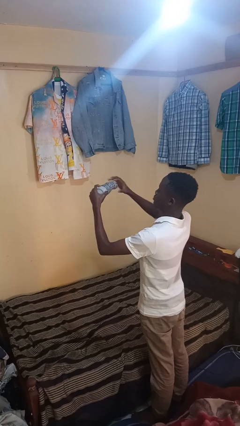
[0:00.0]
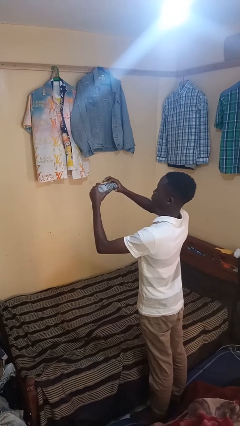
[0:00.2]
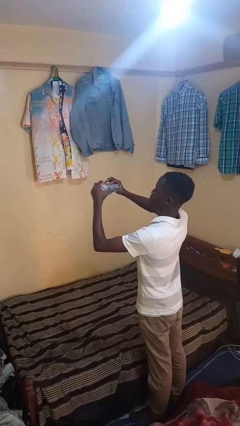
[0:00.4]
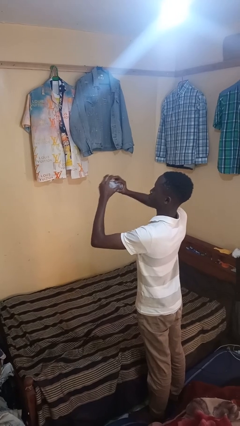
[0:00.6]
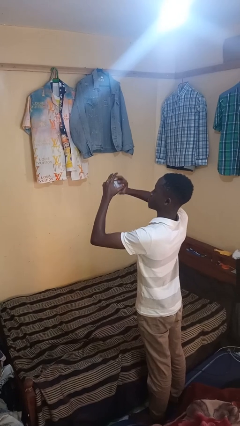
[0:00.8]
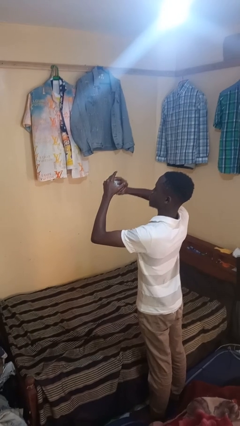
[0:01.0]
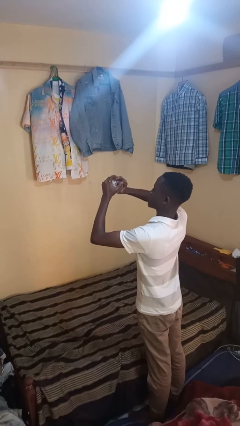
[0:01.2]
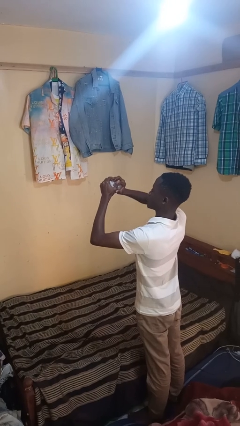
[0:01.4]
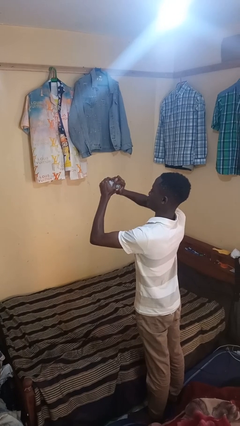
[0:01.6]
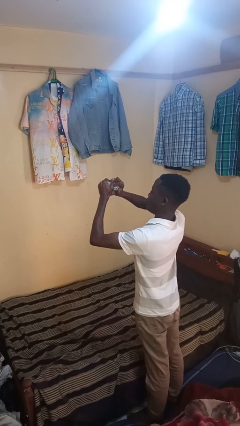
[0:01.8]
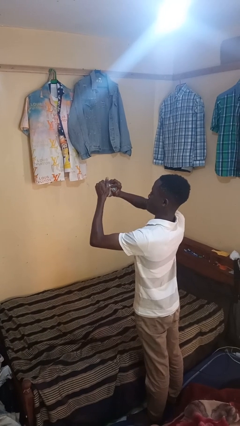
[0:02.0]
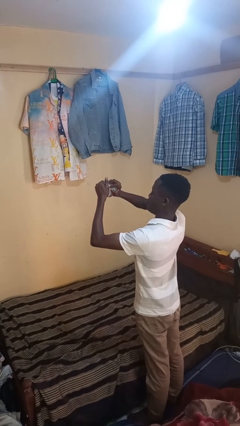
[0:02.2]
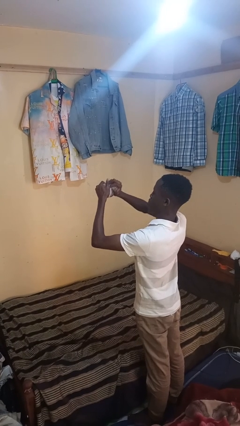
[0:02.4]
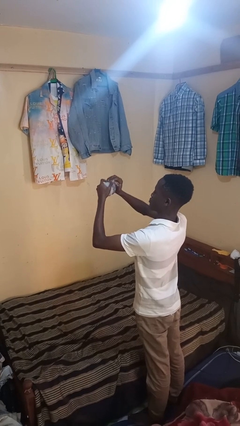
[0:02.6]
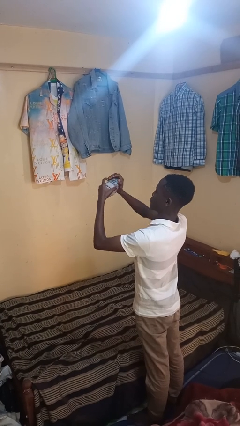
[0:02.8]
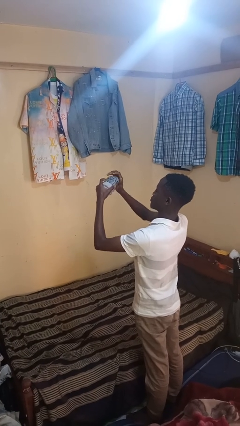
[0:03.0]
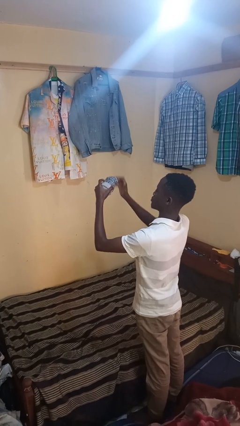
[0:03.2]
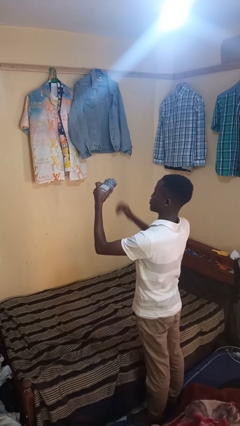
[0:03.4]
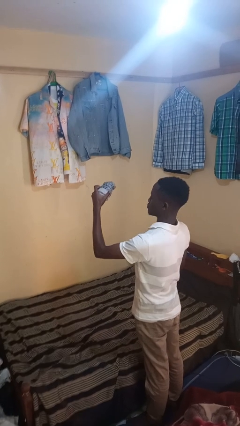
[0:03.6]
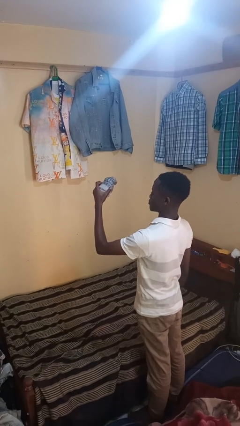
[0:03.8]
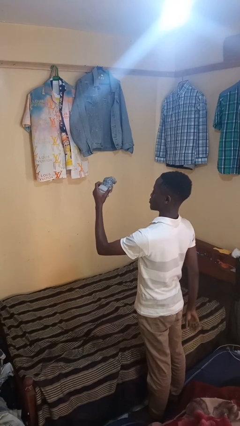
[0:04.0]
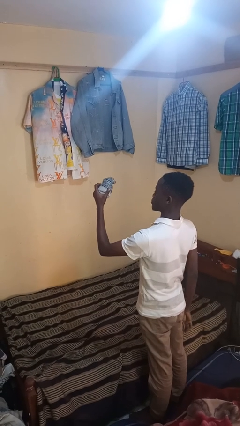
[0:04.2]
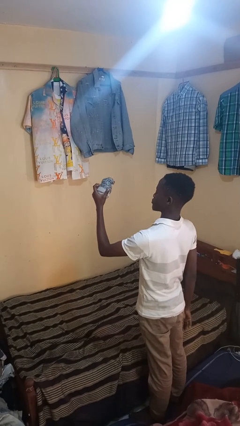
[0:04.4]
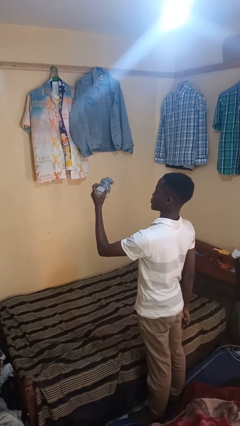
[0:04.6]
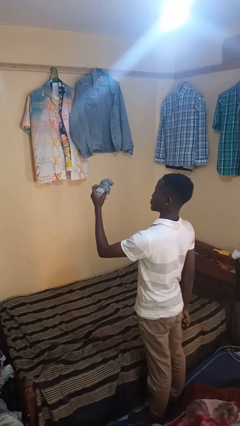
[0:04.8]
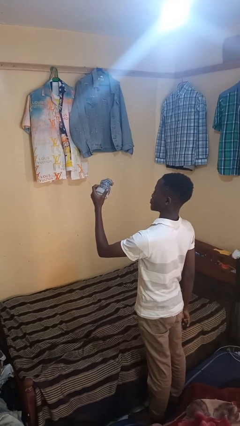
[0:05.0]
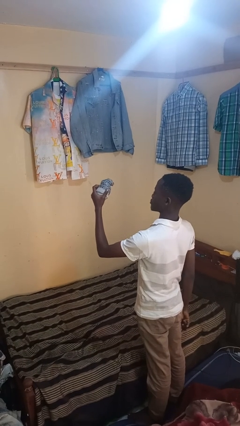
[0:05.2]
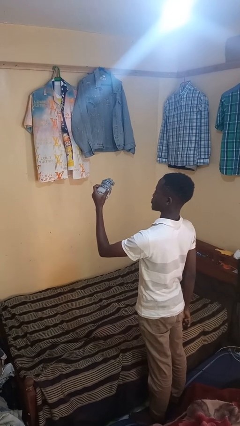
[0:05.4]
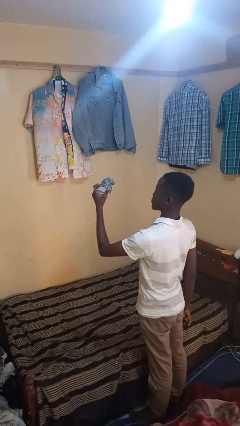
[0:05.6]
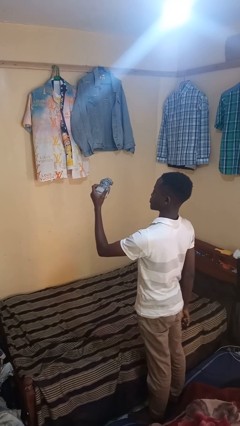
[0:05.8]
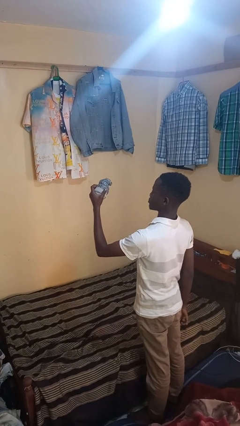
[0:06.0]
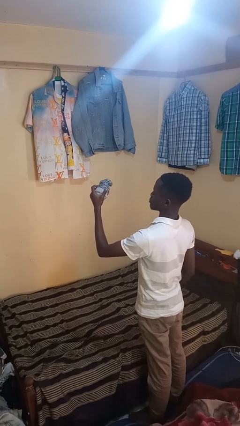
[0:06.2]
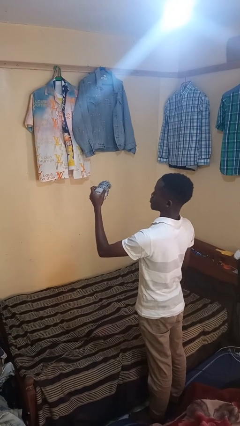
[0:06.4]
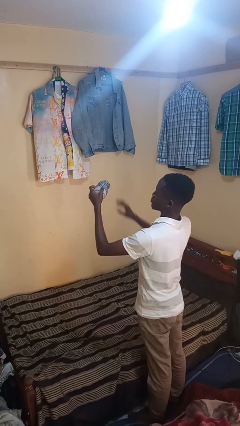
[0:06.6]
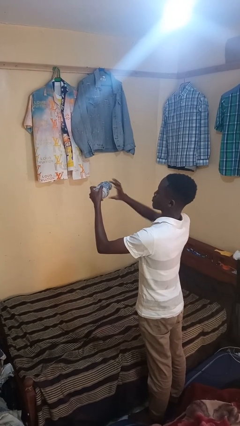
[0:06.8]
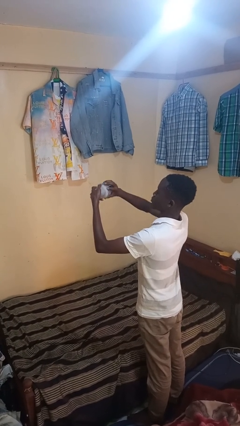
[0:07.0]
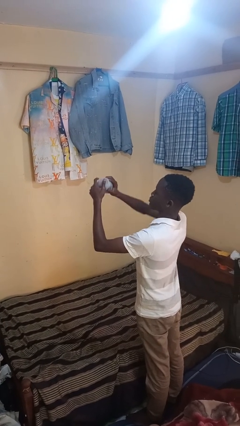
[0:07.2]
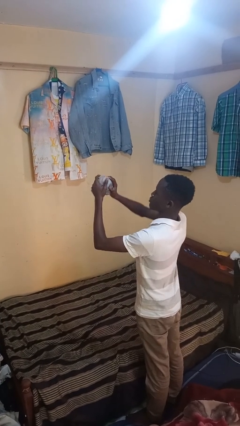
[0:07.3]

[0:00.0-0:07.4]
person squeezes object

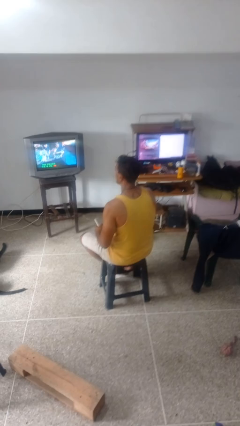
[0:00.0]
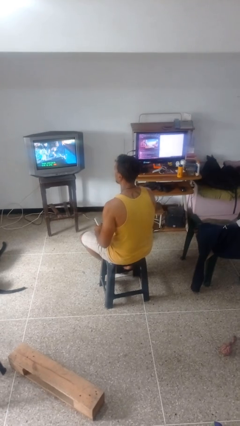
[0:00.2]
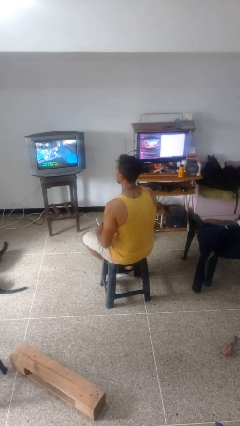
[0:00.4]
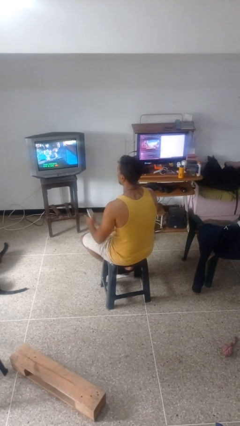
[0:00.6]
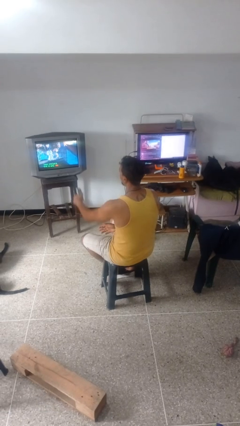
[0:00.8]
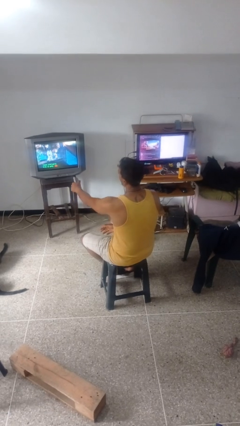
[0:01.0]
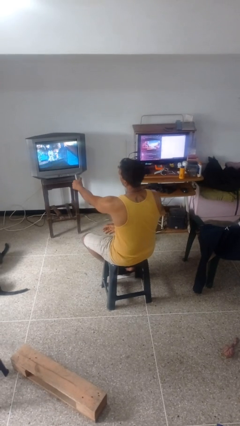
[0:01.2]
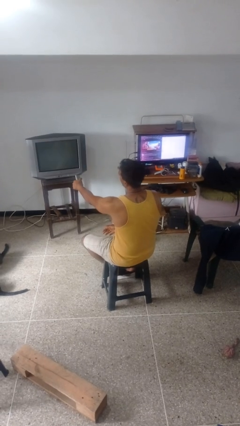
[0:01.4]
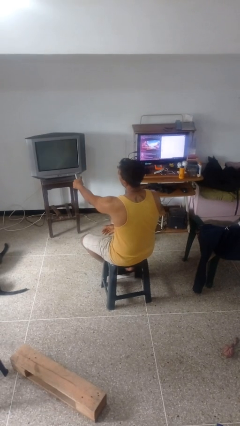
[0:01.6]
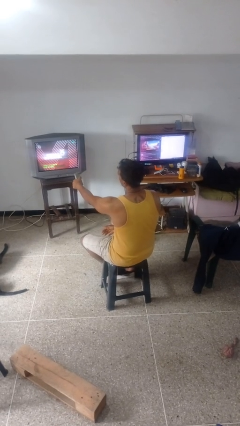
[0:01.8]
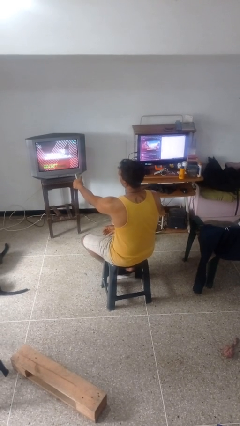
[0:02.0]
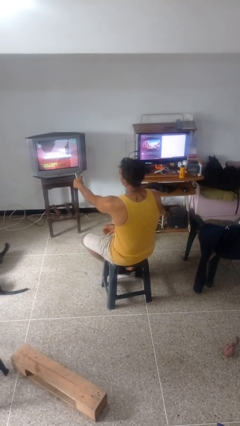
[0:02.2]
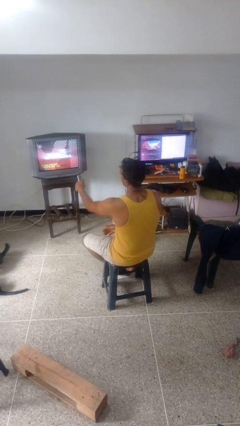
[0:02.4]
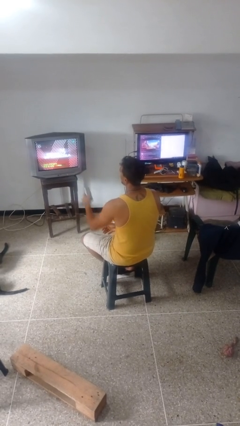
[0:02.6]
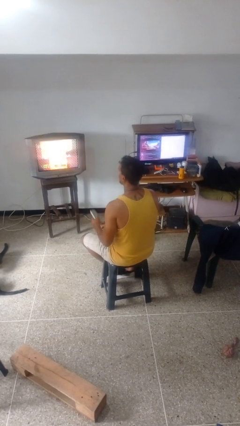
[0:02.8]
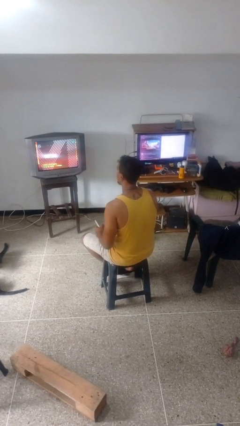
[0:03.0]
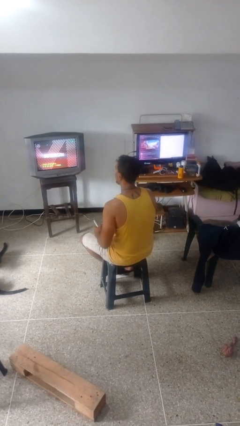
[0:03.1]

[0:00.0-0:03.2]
person uses television remote

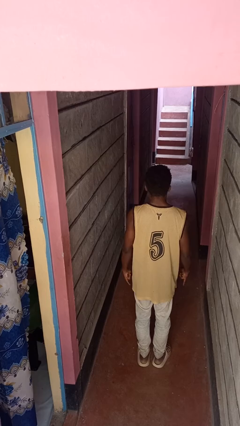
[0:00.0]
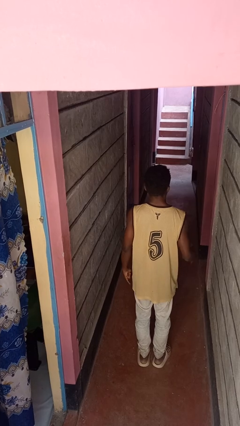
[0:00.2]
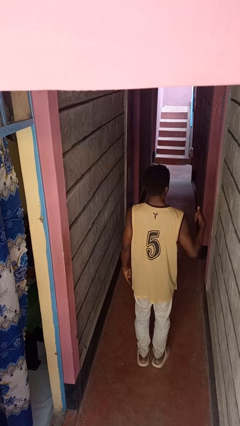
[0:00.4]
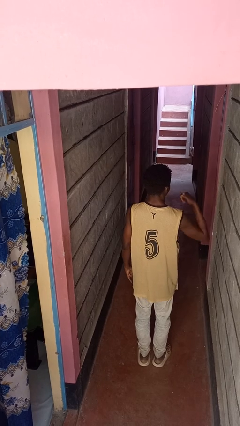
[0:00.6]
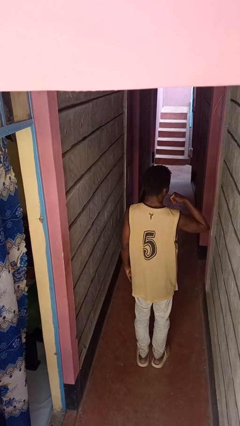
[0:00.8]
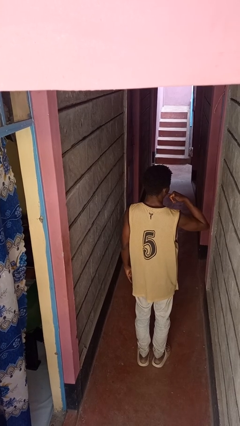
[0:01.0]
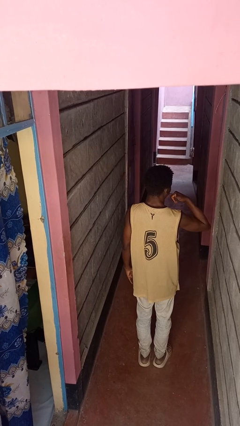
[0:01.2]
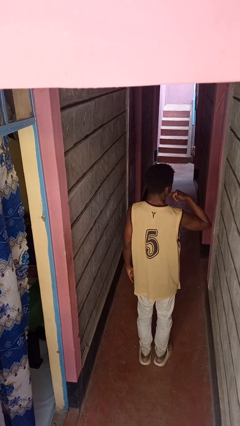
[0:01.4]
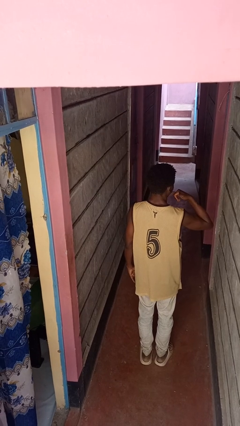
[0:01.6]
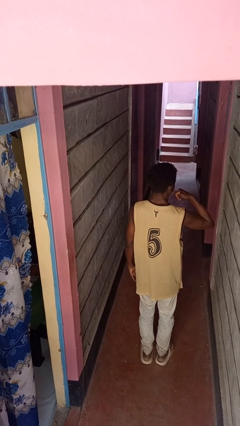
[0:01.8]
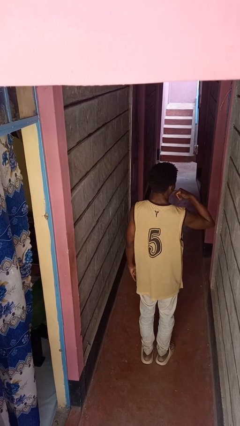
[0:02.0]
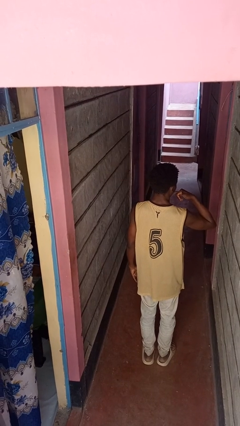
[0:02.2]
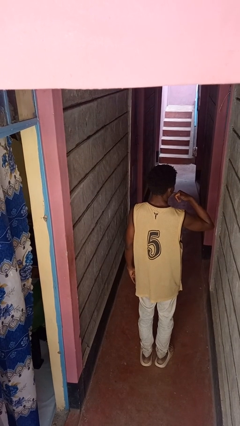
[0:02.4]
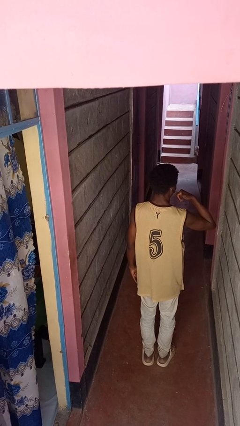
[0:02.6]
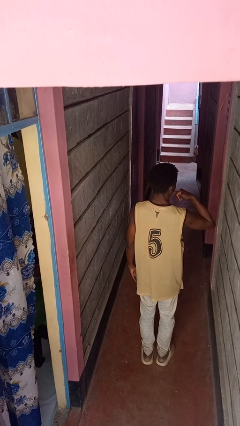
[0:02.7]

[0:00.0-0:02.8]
person gestures call me

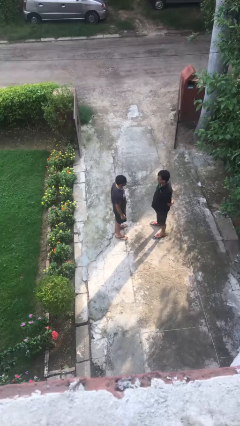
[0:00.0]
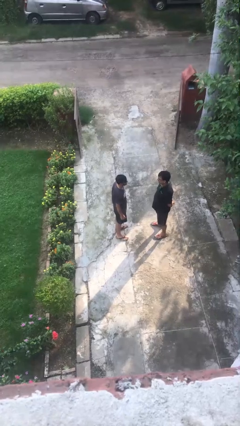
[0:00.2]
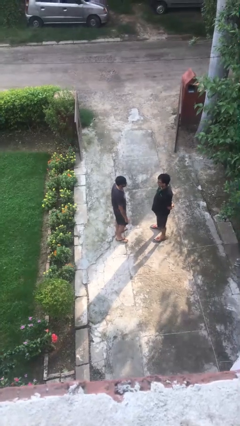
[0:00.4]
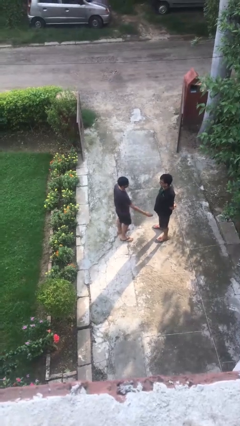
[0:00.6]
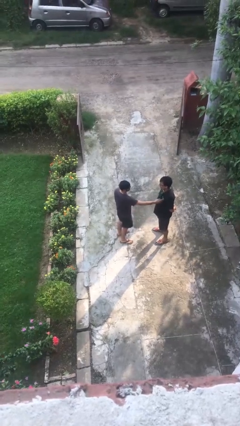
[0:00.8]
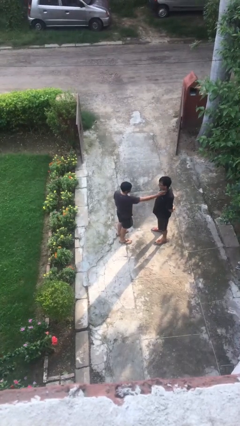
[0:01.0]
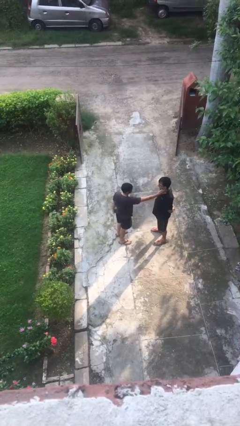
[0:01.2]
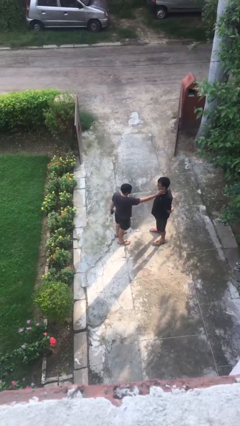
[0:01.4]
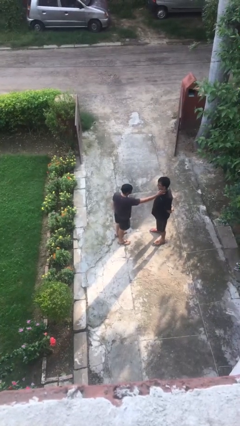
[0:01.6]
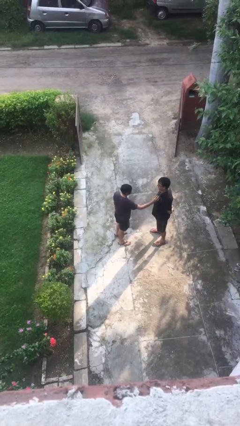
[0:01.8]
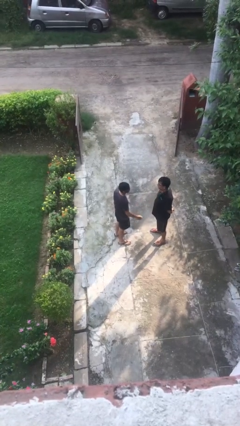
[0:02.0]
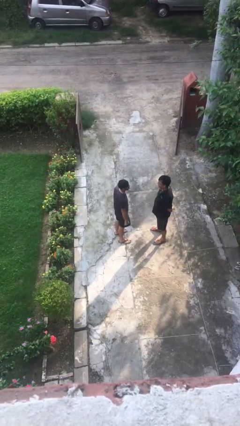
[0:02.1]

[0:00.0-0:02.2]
person touches face of person

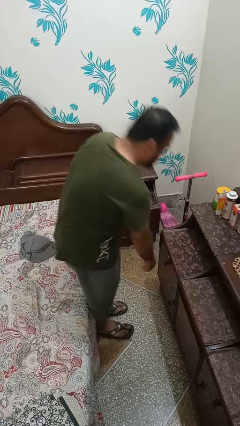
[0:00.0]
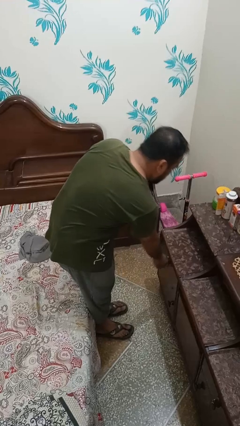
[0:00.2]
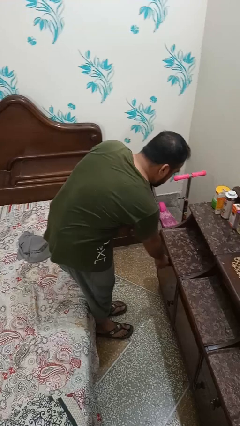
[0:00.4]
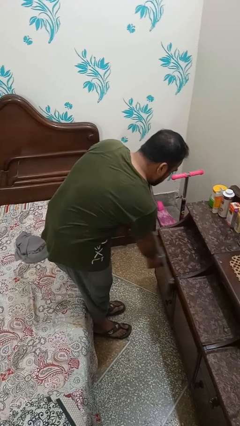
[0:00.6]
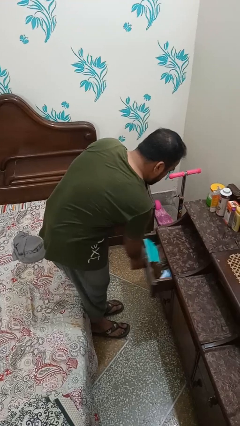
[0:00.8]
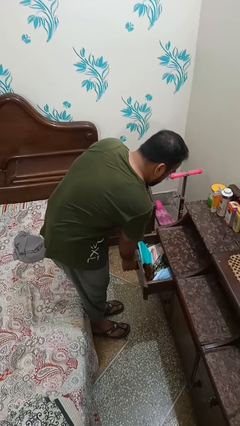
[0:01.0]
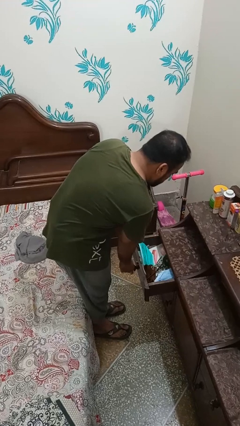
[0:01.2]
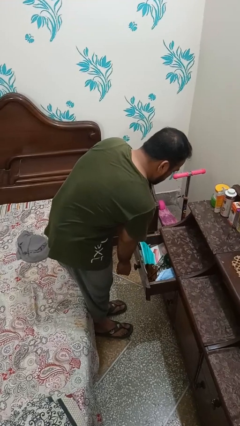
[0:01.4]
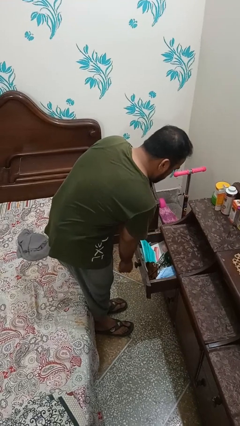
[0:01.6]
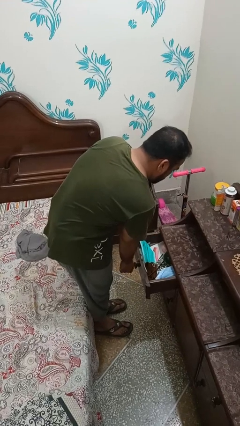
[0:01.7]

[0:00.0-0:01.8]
person opens dresser drawer

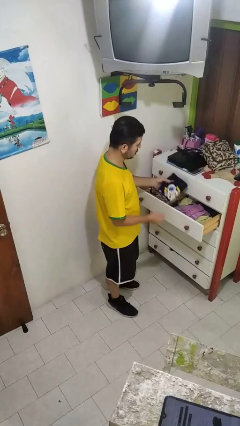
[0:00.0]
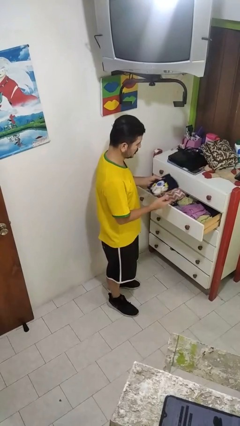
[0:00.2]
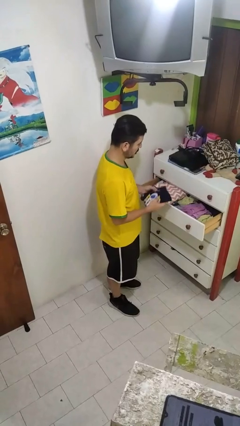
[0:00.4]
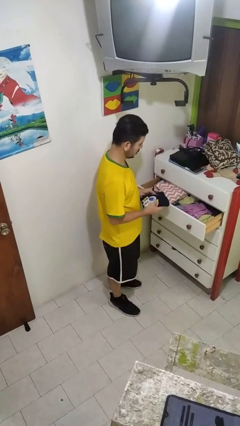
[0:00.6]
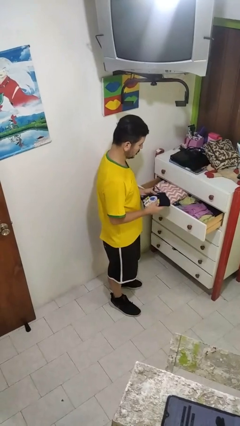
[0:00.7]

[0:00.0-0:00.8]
person takes clothes from dresser
